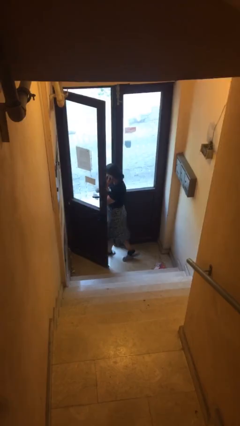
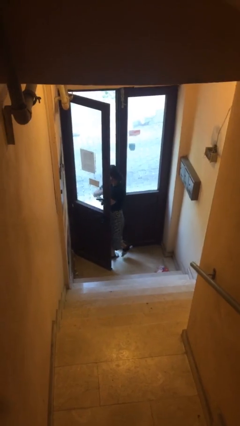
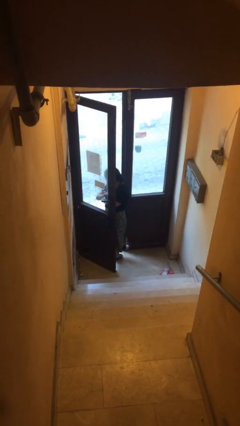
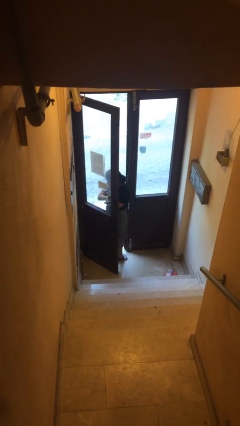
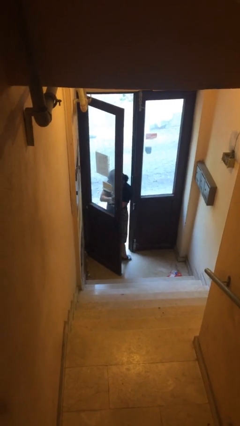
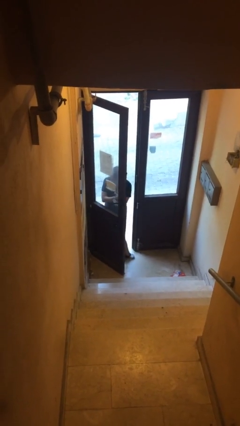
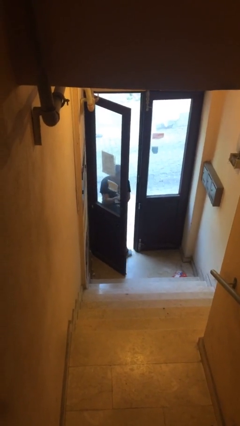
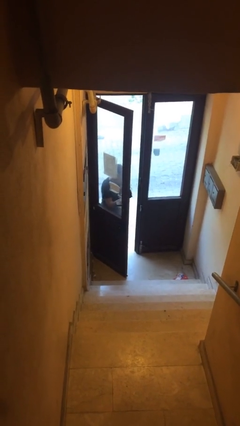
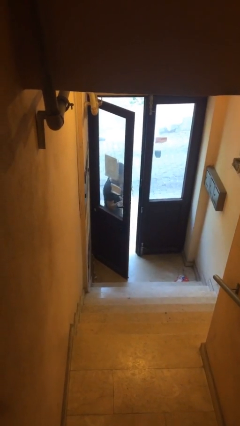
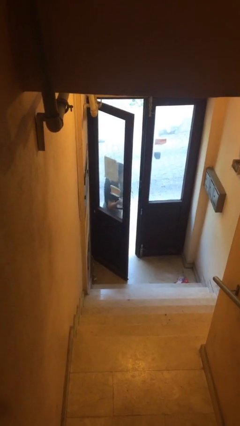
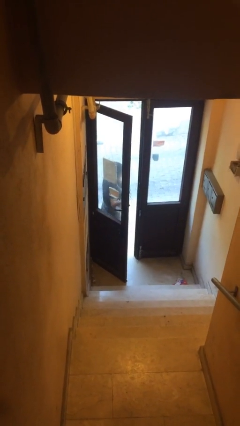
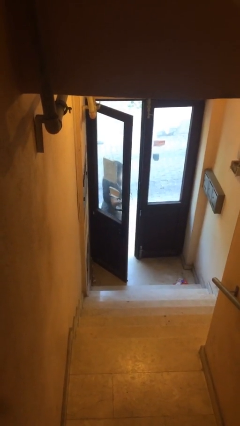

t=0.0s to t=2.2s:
person exits scene through structure

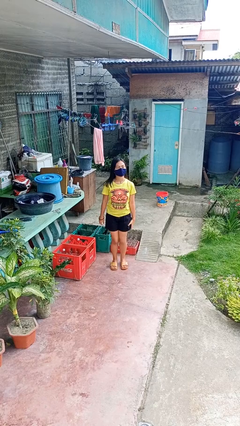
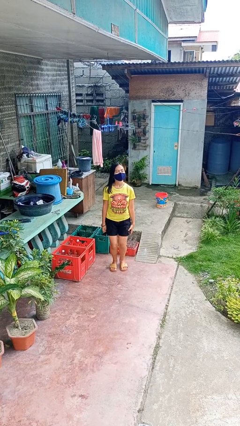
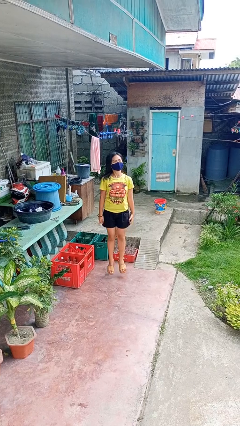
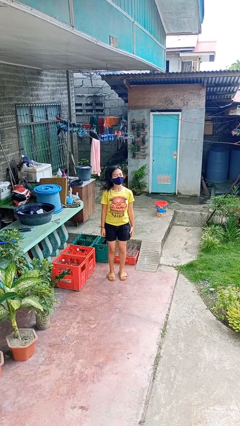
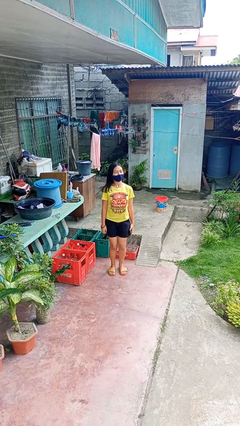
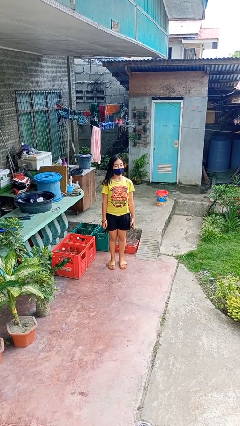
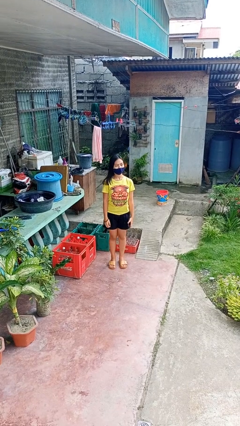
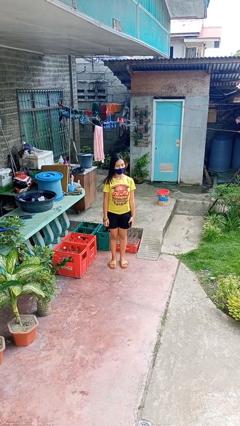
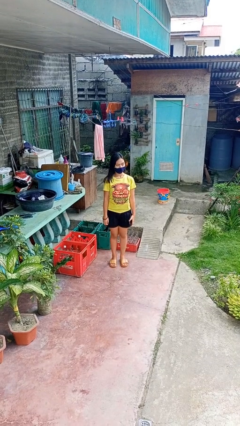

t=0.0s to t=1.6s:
person jumps

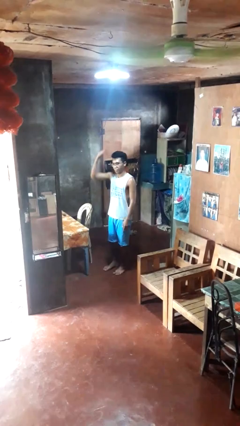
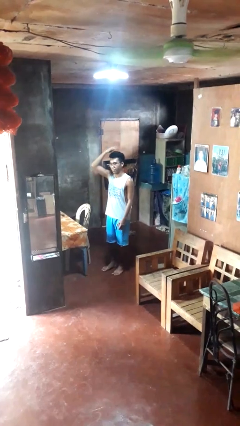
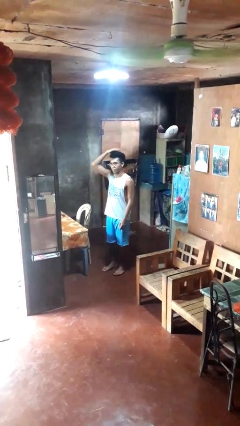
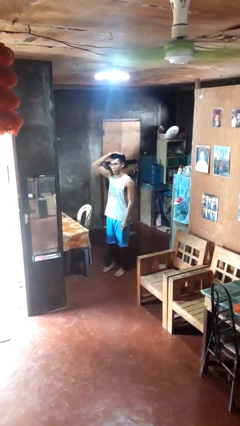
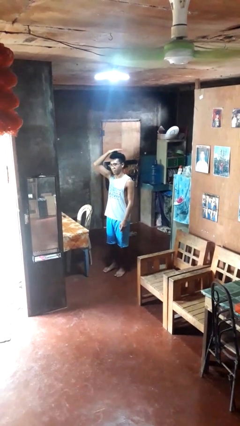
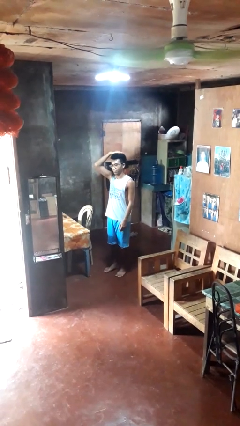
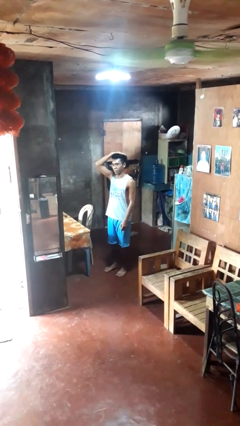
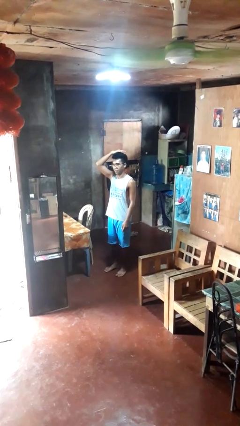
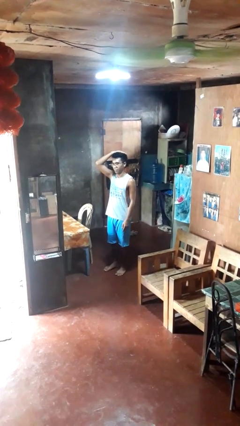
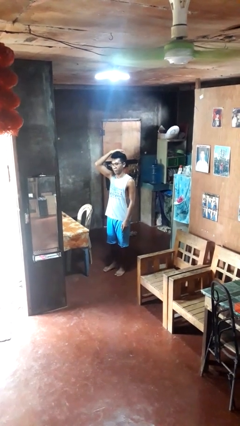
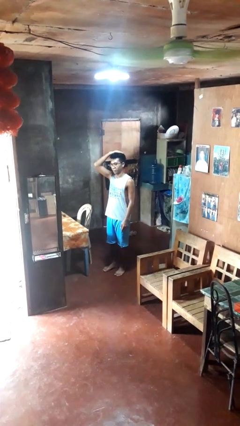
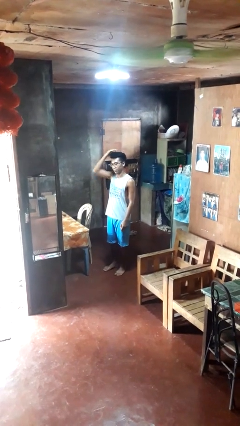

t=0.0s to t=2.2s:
person pats head

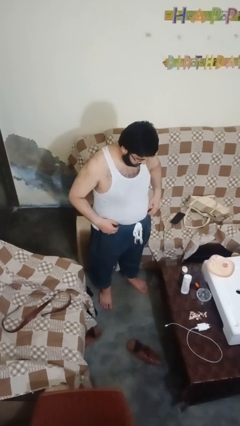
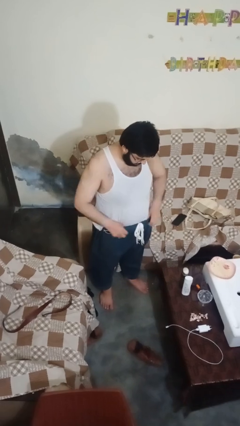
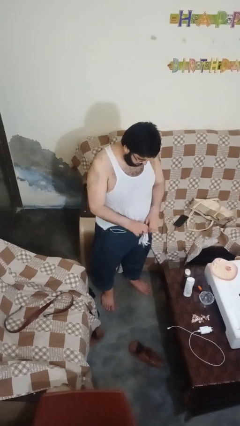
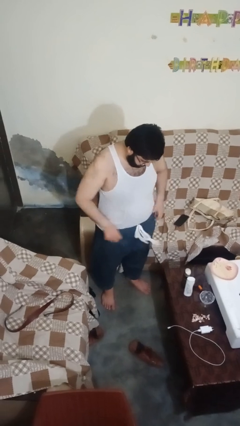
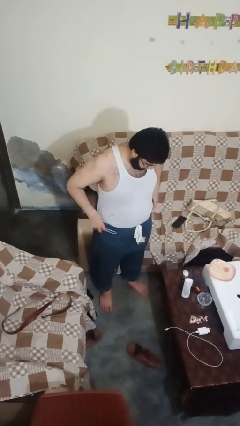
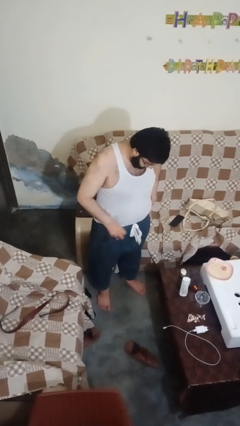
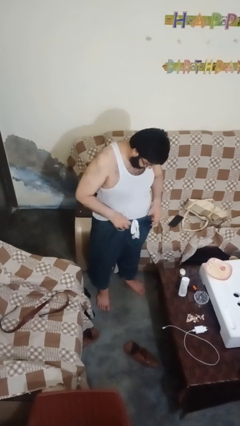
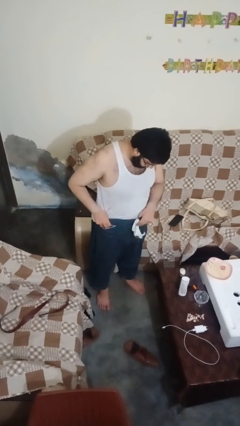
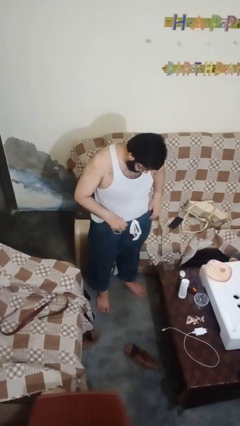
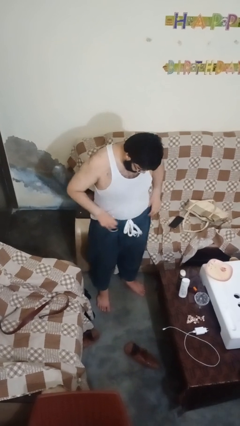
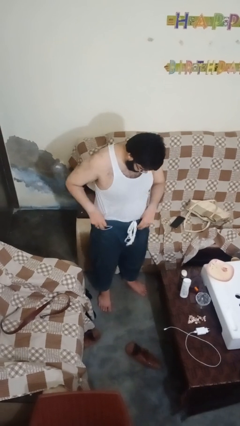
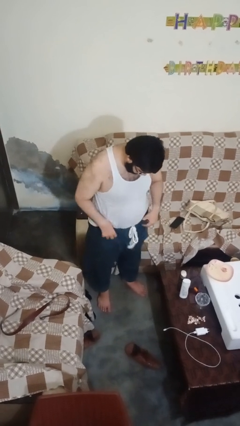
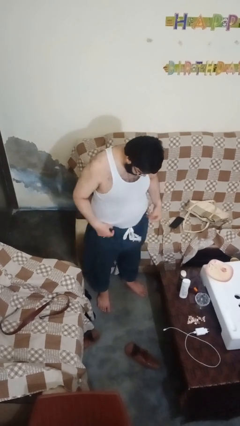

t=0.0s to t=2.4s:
person hikes up pants

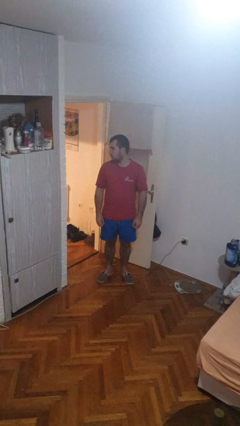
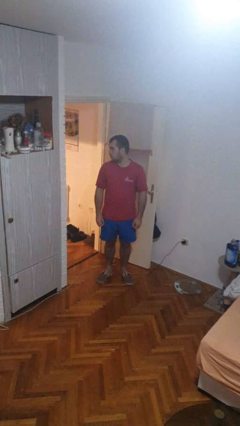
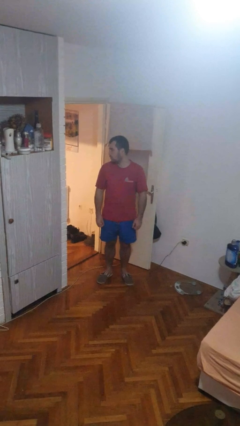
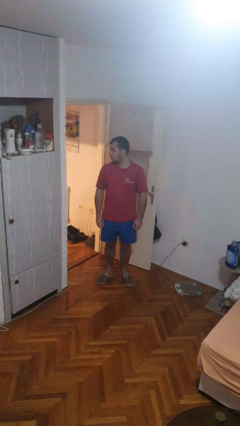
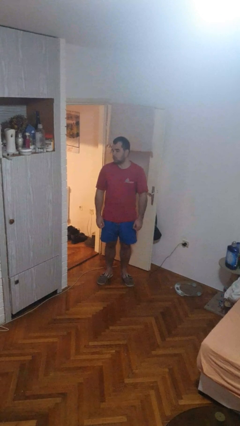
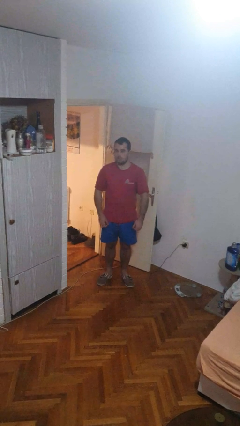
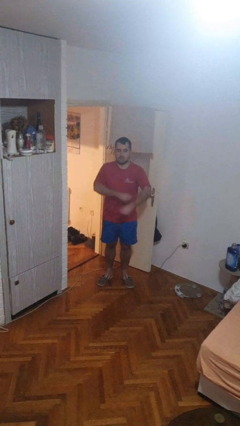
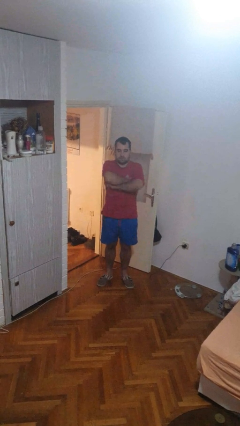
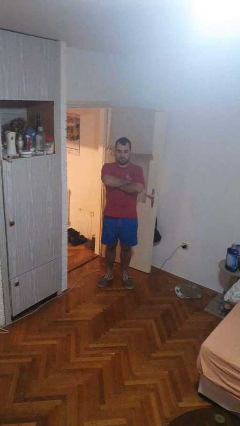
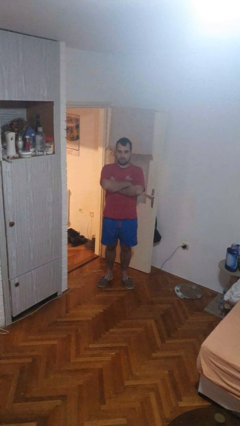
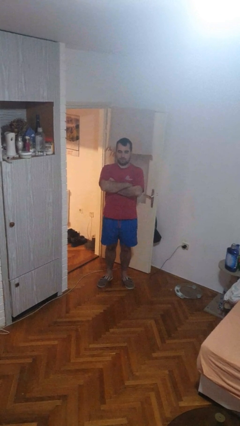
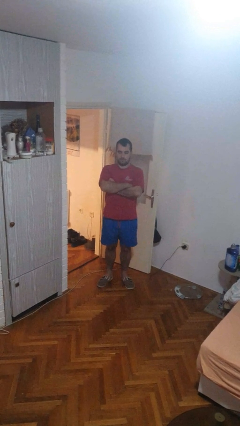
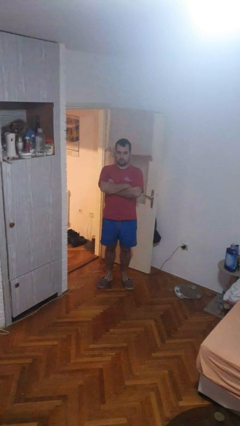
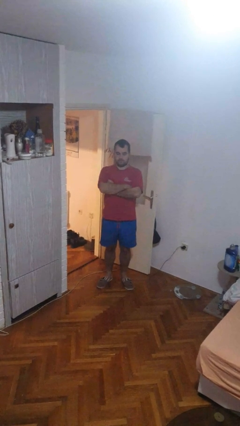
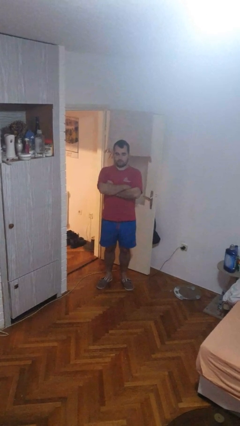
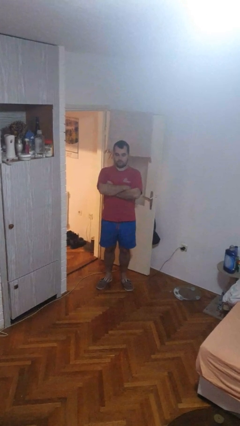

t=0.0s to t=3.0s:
person crosses arms

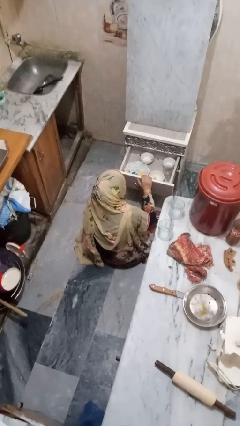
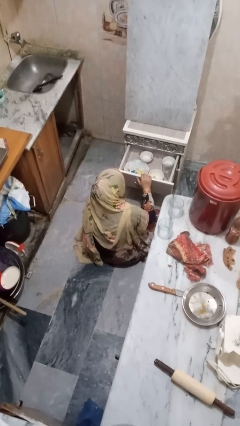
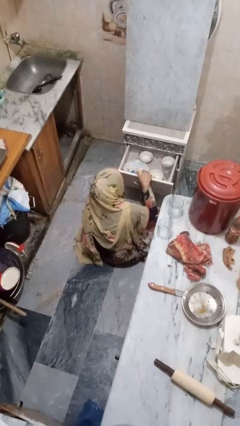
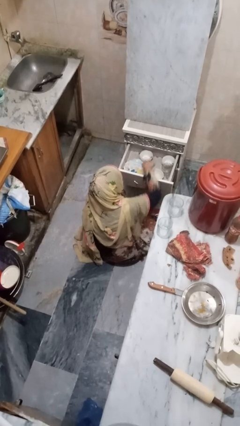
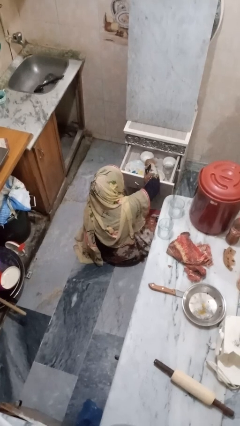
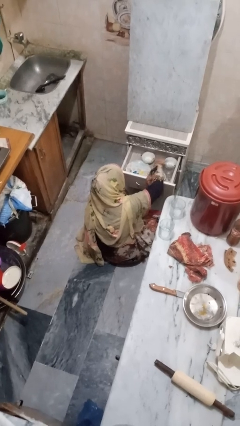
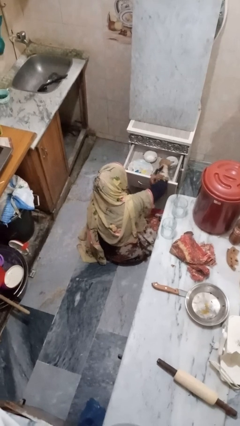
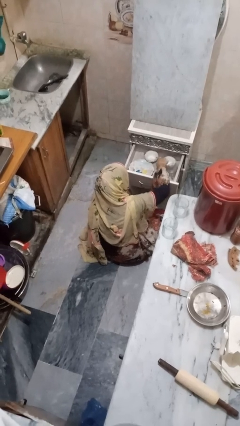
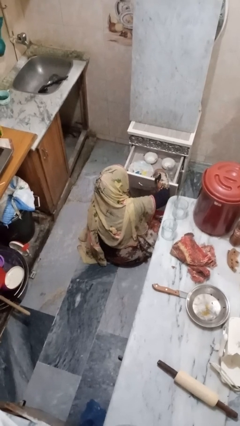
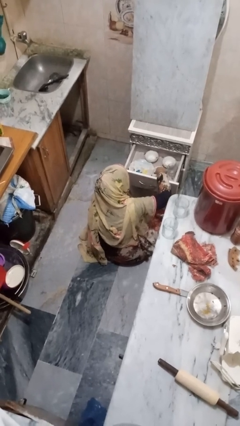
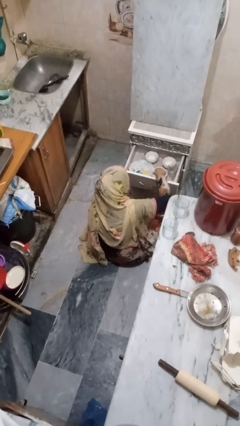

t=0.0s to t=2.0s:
person searches in kitchen drawer

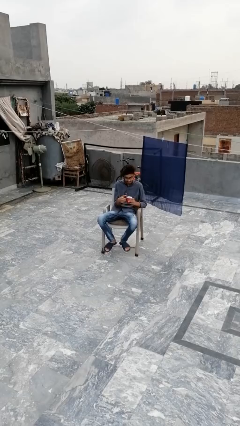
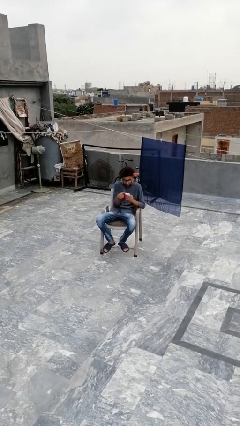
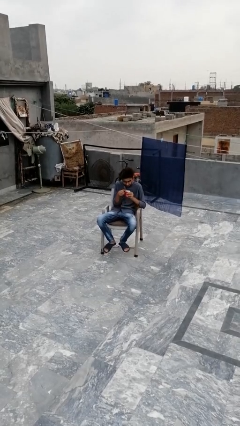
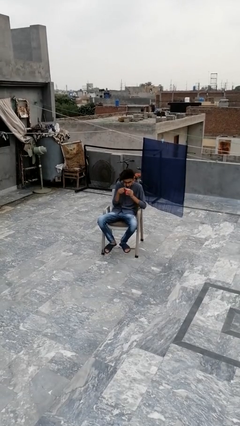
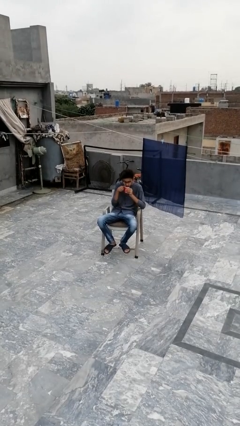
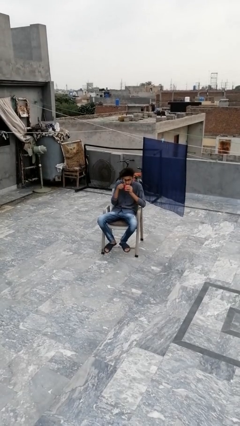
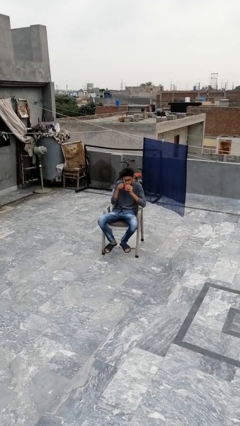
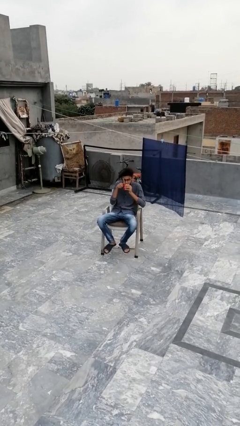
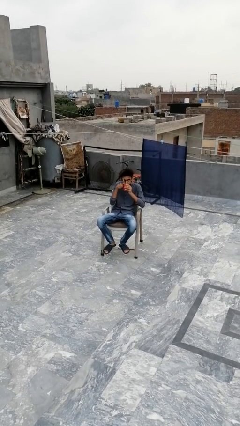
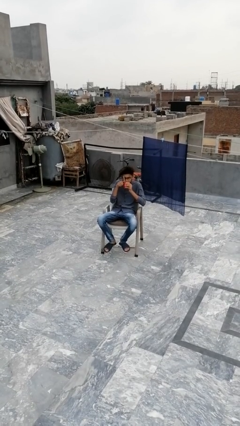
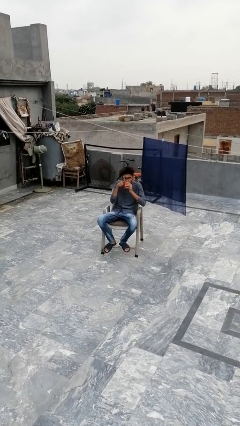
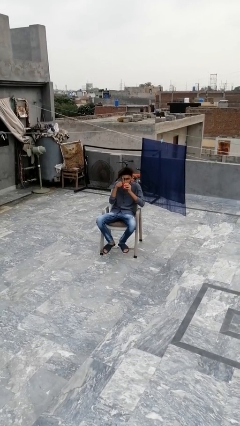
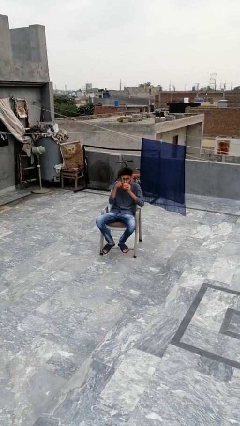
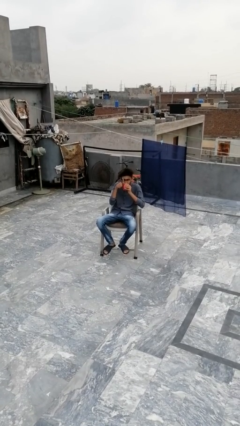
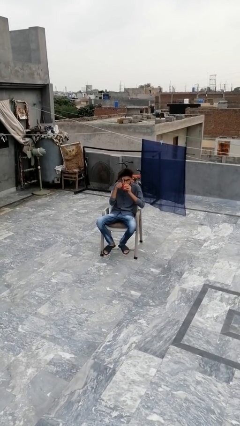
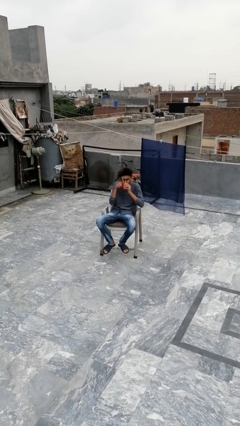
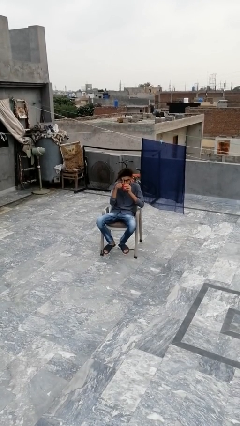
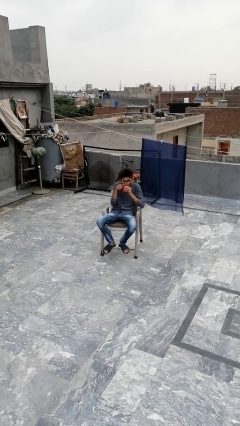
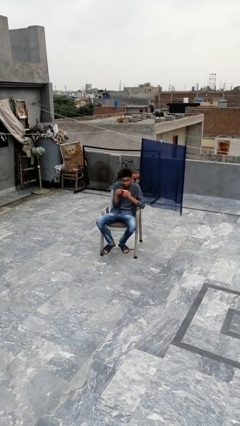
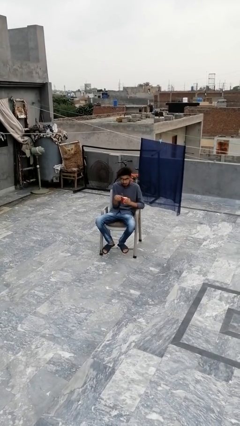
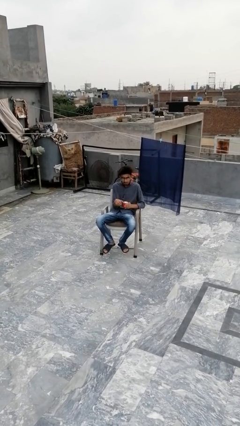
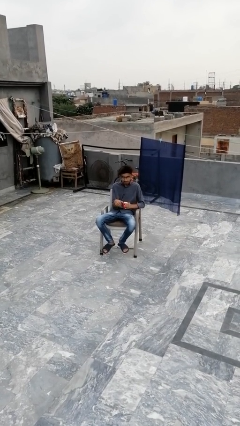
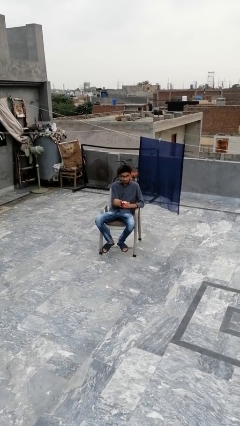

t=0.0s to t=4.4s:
person drinks from mug
